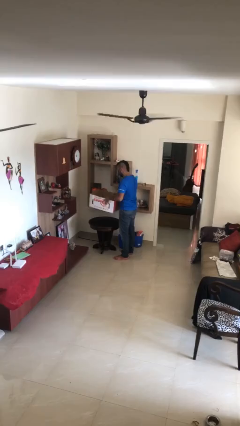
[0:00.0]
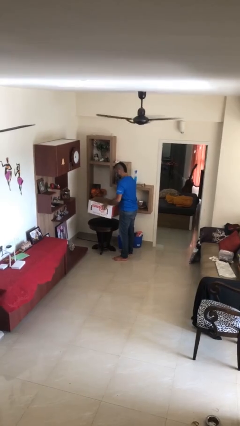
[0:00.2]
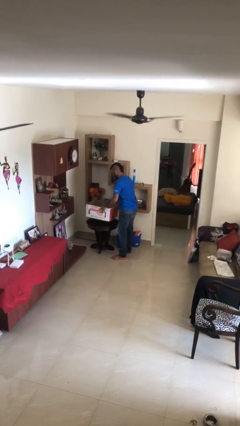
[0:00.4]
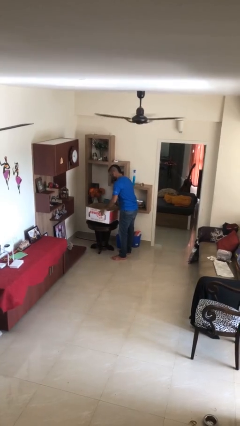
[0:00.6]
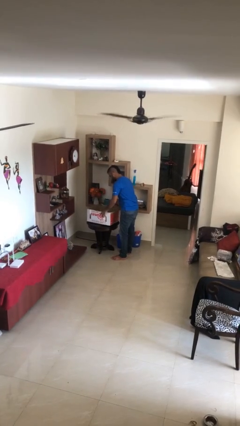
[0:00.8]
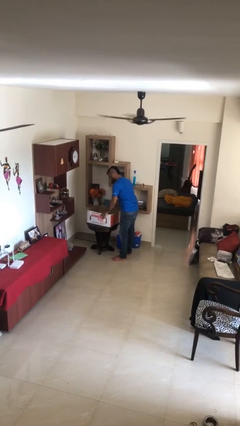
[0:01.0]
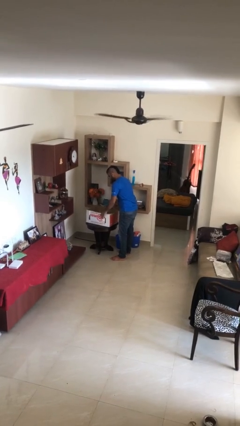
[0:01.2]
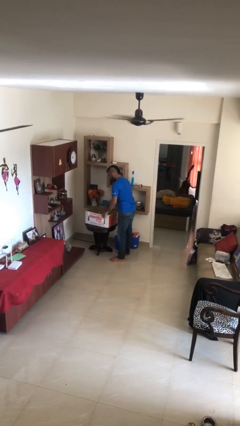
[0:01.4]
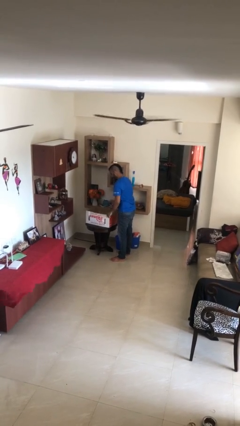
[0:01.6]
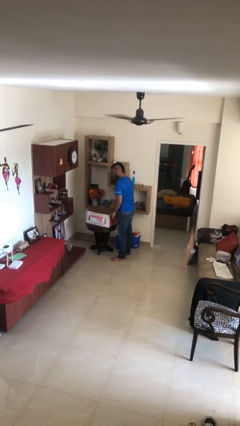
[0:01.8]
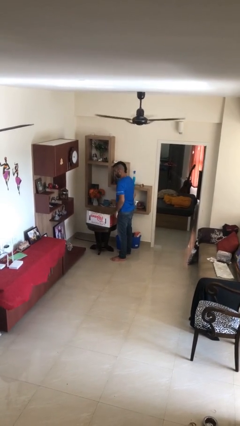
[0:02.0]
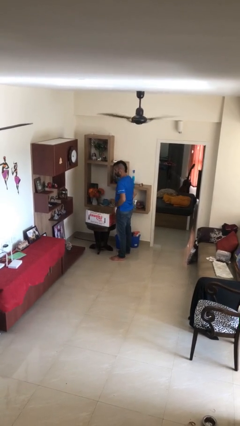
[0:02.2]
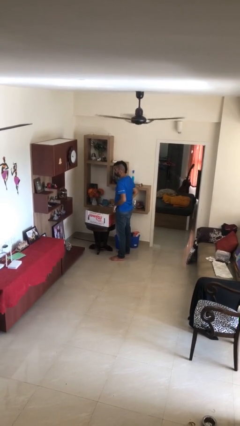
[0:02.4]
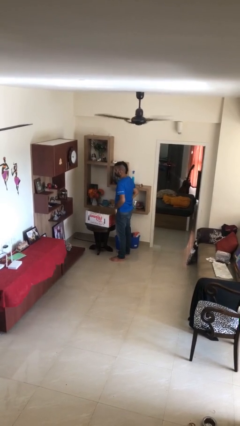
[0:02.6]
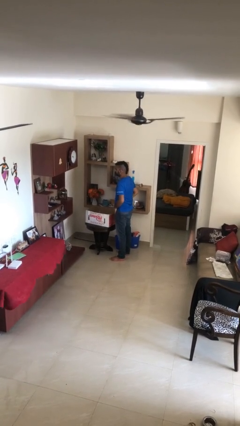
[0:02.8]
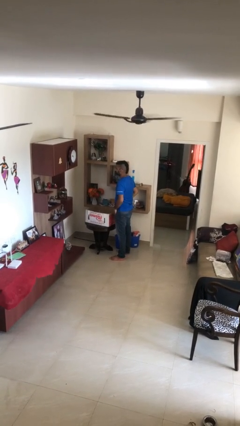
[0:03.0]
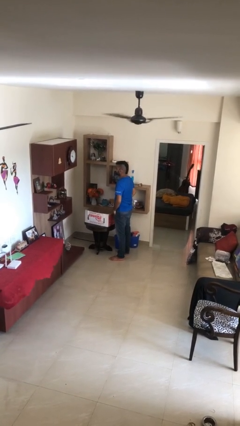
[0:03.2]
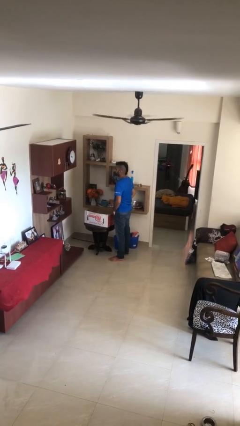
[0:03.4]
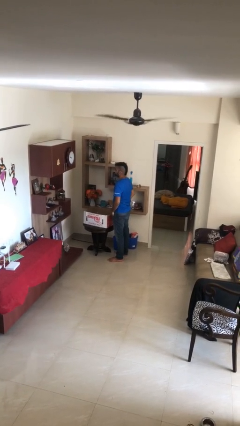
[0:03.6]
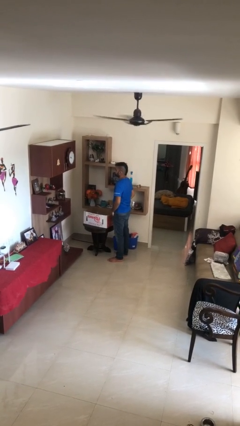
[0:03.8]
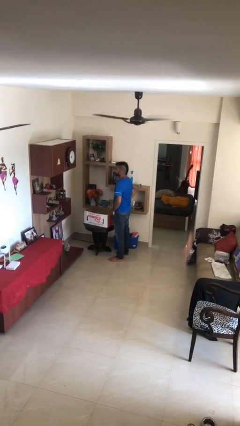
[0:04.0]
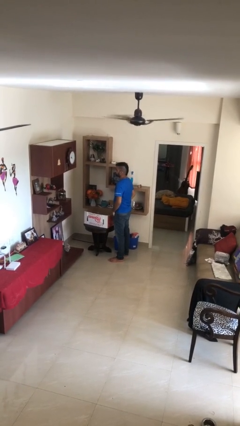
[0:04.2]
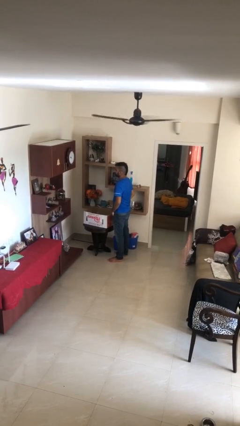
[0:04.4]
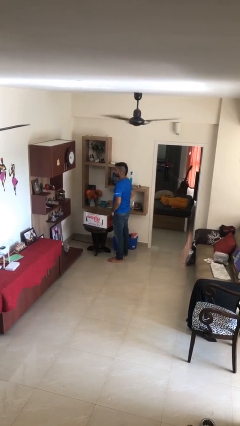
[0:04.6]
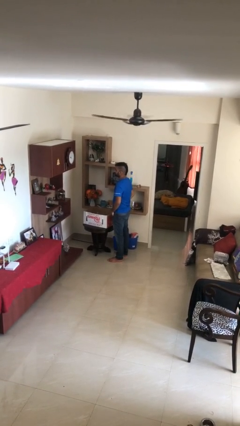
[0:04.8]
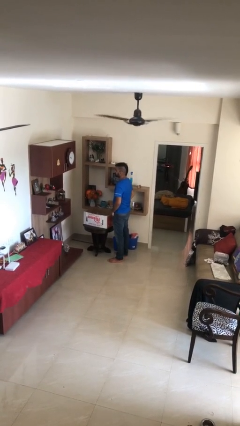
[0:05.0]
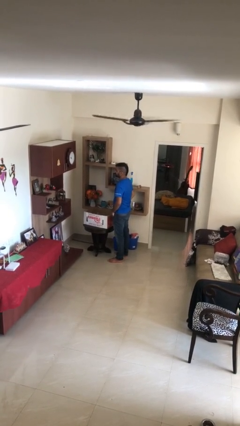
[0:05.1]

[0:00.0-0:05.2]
person puts down object on table

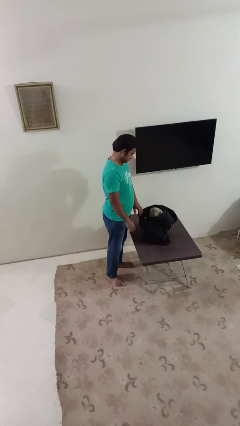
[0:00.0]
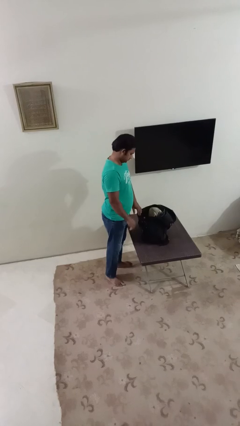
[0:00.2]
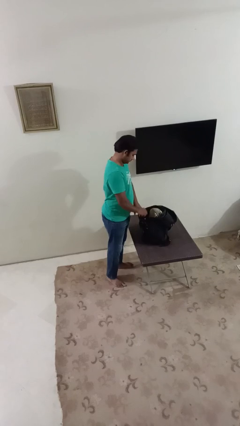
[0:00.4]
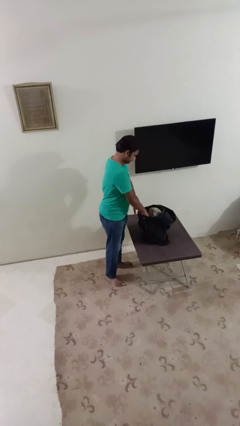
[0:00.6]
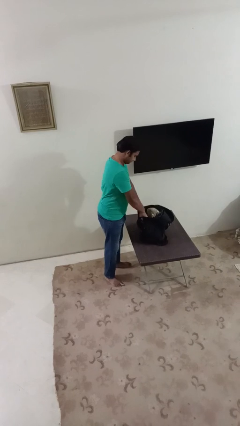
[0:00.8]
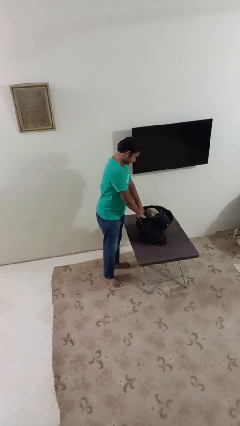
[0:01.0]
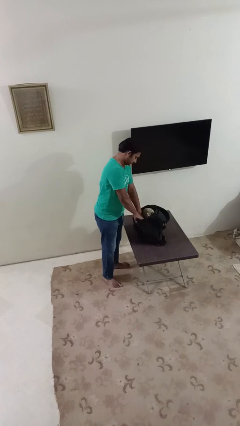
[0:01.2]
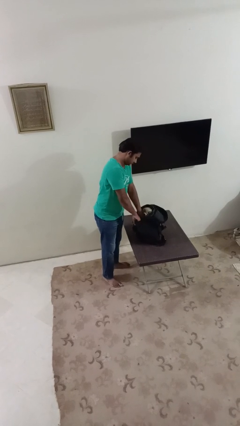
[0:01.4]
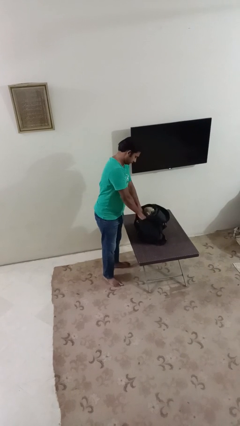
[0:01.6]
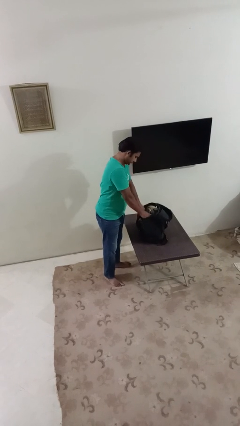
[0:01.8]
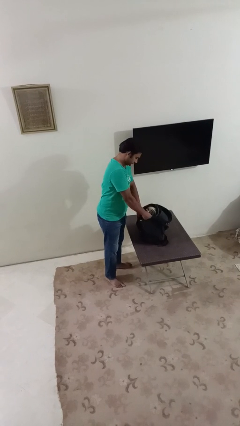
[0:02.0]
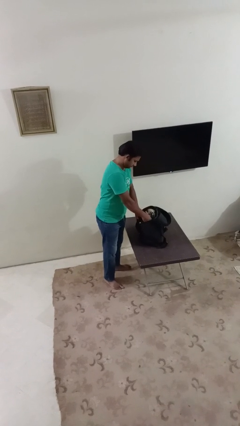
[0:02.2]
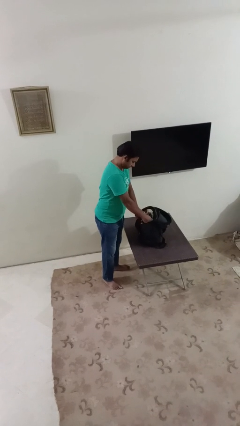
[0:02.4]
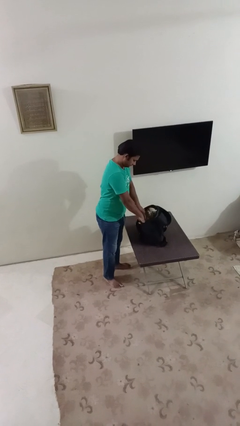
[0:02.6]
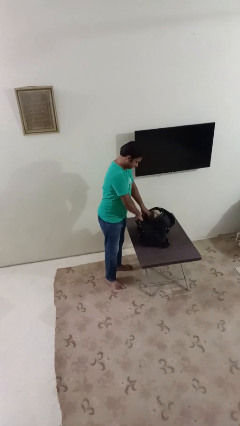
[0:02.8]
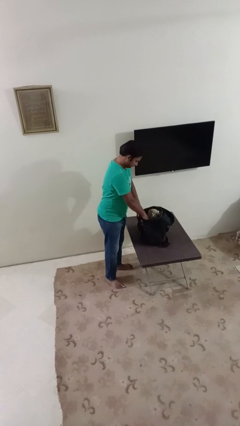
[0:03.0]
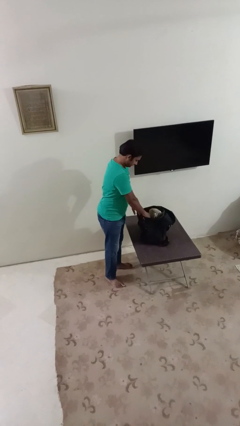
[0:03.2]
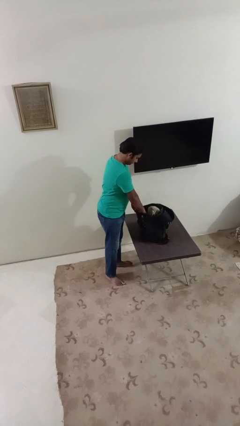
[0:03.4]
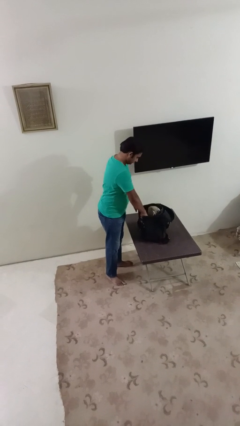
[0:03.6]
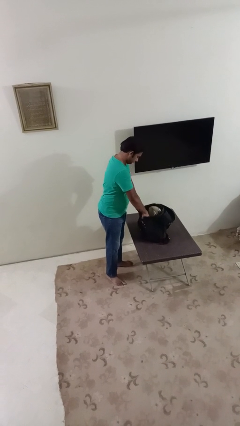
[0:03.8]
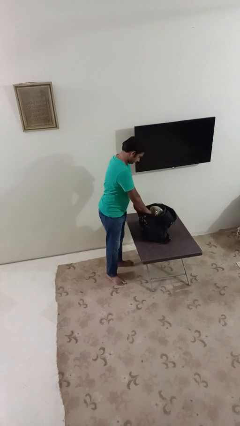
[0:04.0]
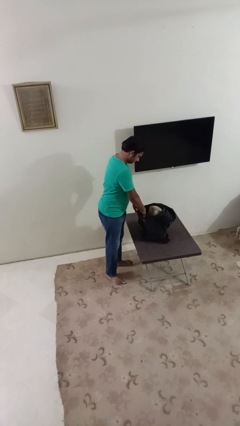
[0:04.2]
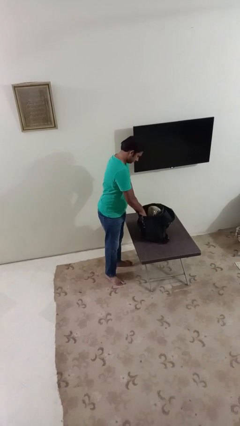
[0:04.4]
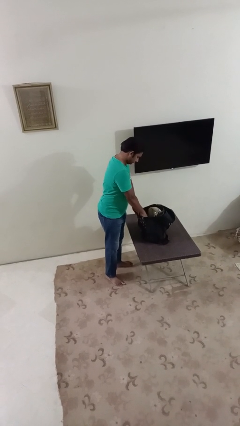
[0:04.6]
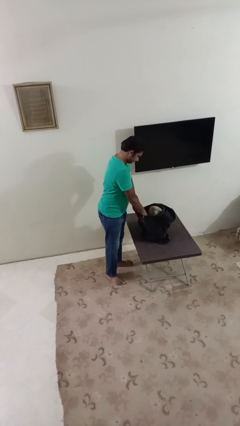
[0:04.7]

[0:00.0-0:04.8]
person searches in backpack

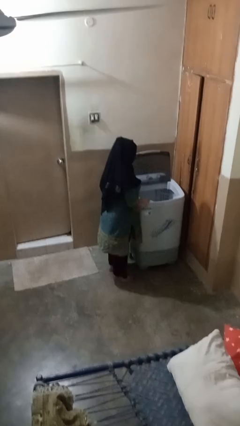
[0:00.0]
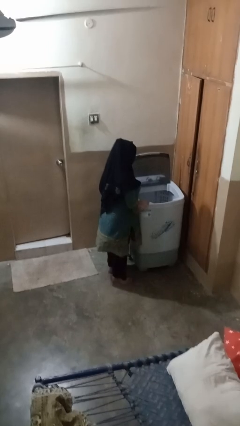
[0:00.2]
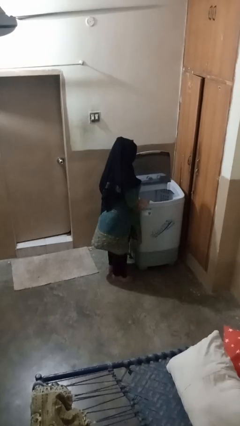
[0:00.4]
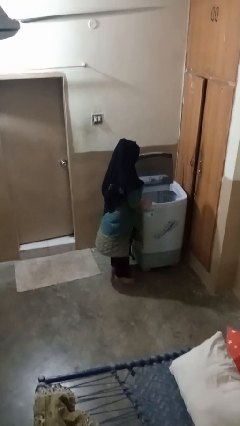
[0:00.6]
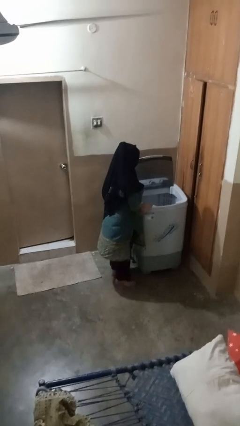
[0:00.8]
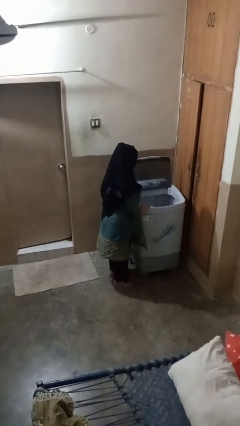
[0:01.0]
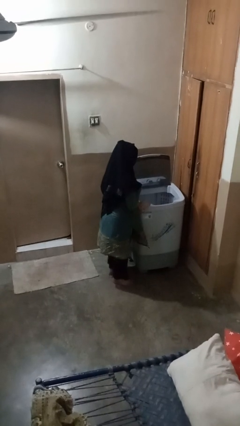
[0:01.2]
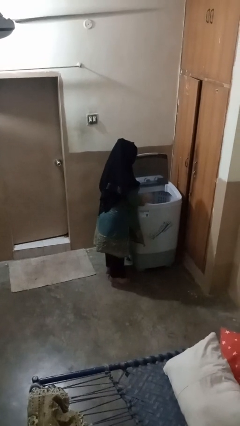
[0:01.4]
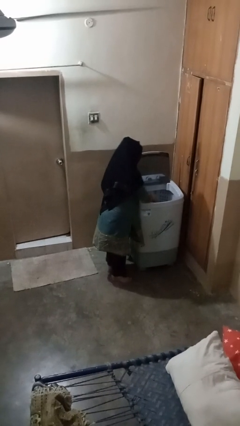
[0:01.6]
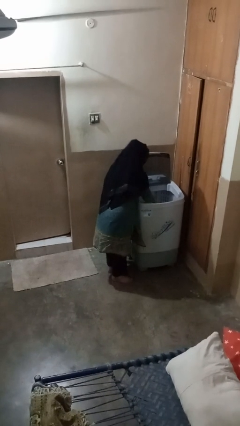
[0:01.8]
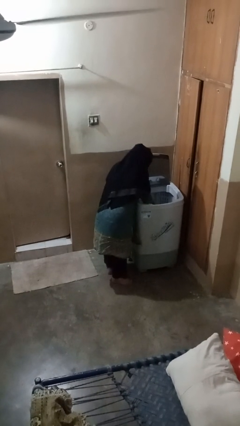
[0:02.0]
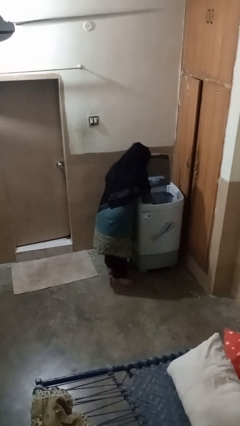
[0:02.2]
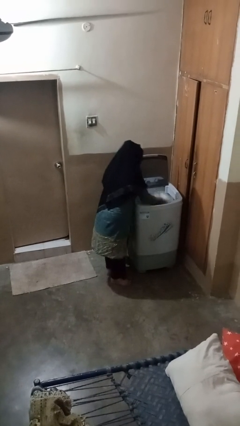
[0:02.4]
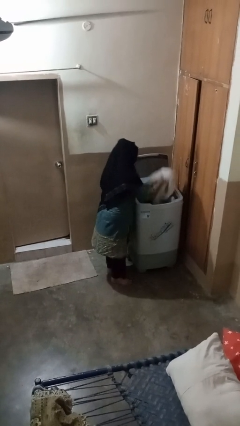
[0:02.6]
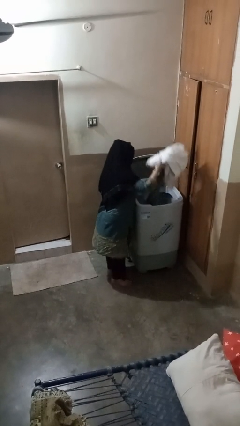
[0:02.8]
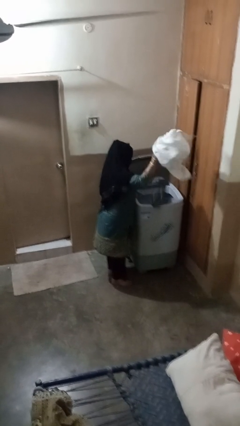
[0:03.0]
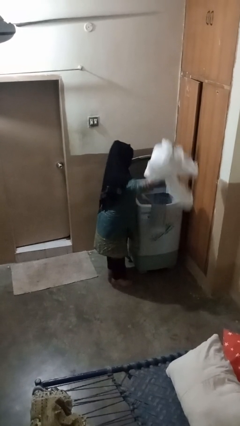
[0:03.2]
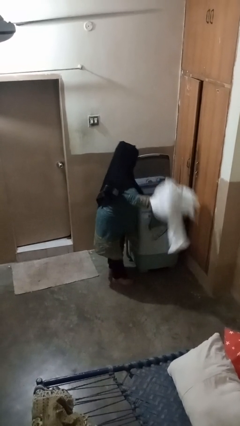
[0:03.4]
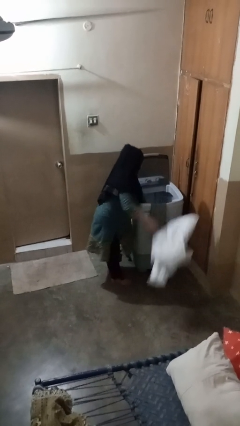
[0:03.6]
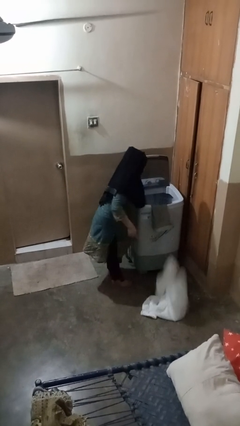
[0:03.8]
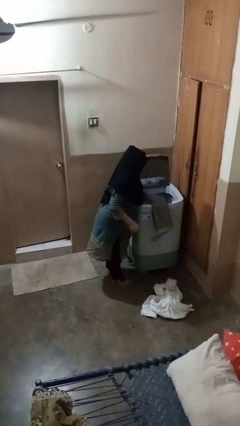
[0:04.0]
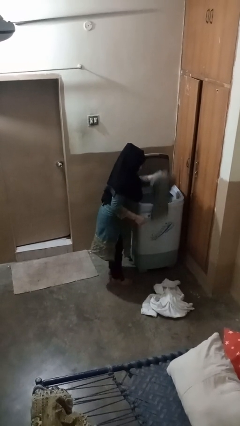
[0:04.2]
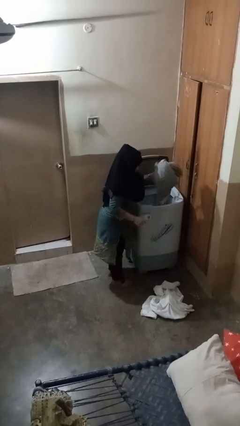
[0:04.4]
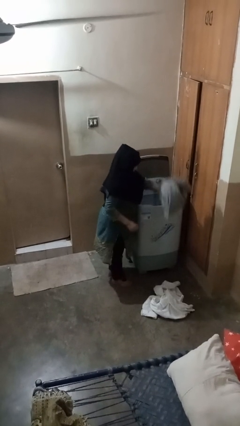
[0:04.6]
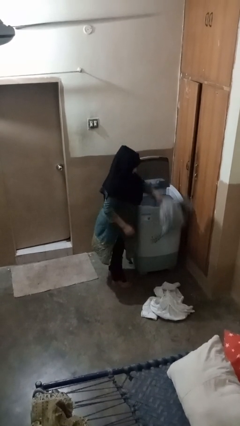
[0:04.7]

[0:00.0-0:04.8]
person unloads clotheswasher

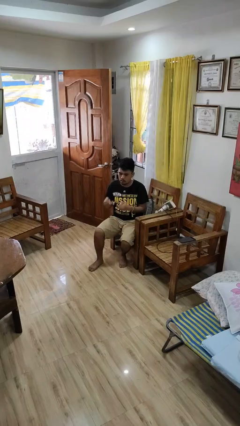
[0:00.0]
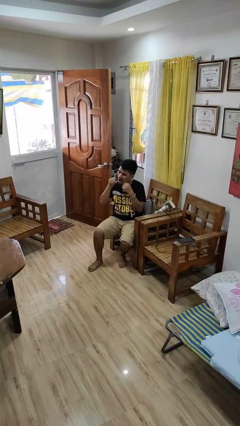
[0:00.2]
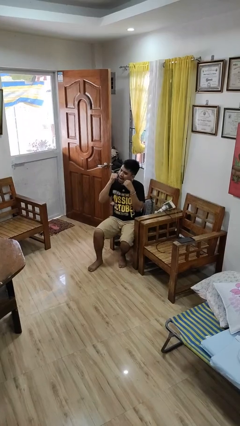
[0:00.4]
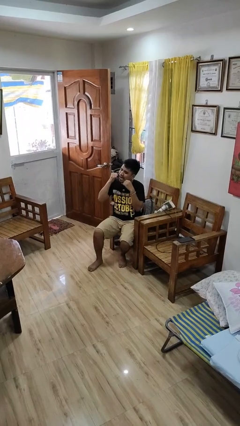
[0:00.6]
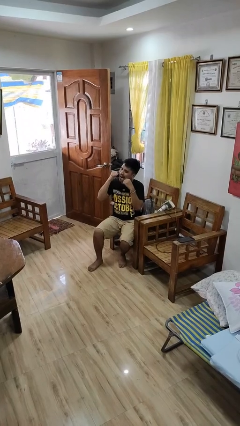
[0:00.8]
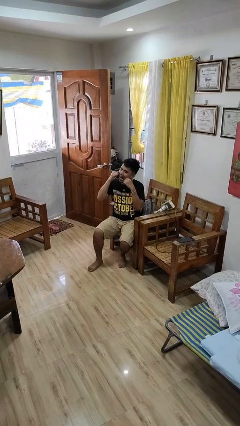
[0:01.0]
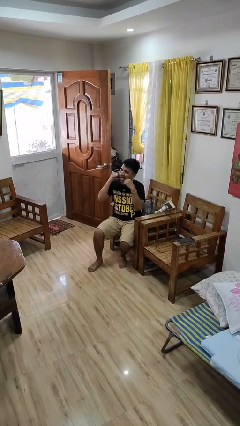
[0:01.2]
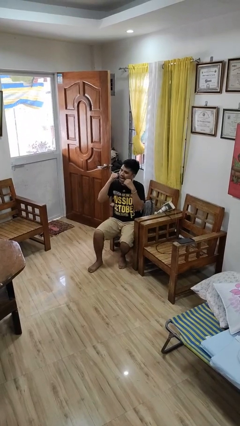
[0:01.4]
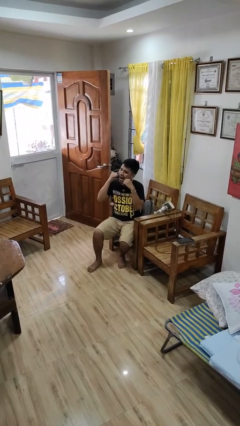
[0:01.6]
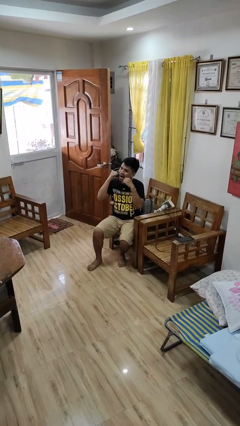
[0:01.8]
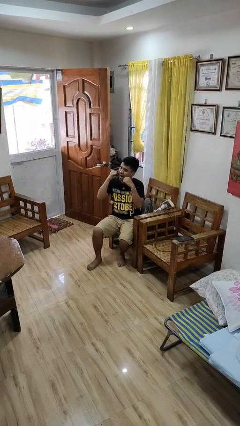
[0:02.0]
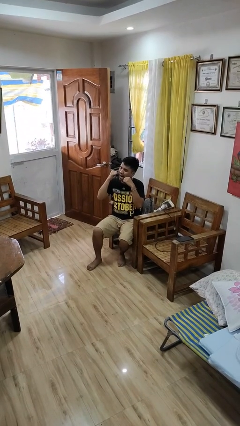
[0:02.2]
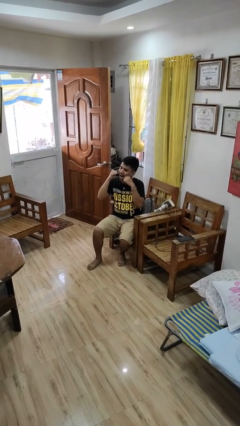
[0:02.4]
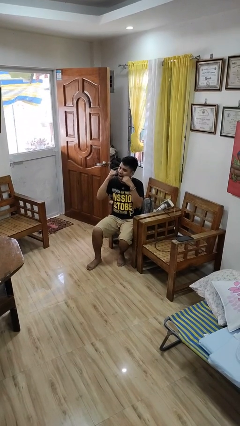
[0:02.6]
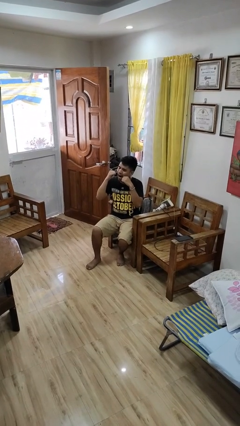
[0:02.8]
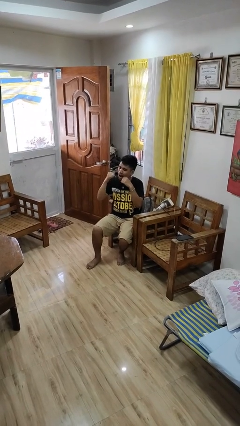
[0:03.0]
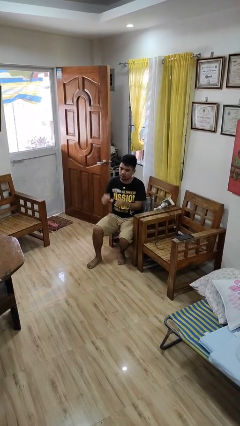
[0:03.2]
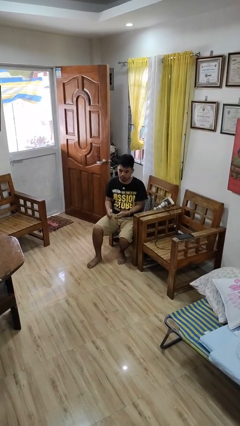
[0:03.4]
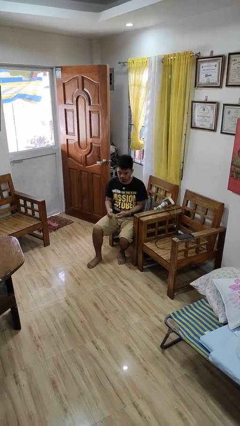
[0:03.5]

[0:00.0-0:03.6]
person flosses
